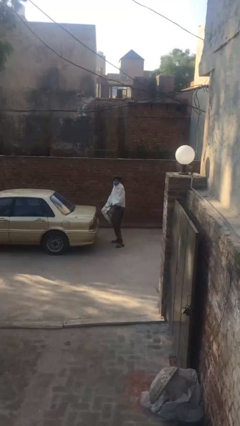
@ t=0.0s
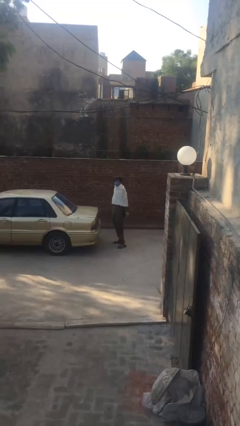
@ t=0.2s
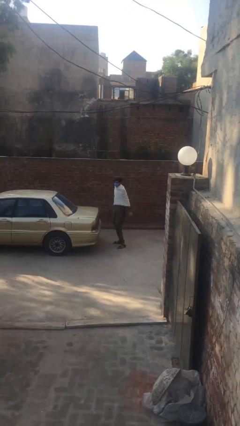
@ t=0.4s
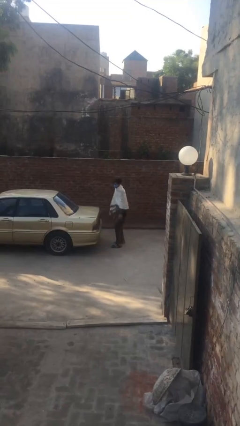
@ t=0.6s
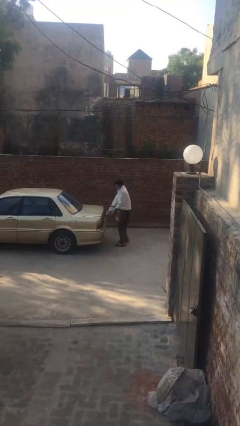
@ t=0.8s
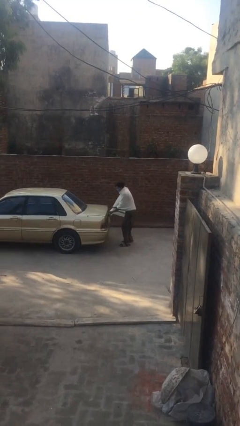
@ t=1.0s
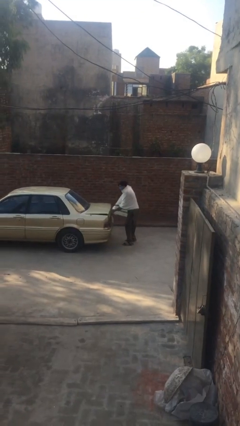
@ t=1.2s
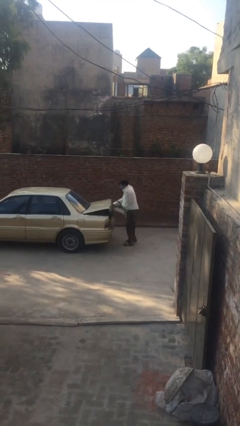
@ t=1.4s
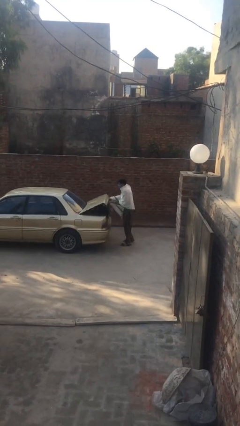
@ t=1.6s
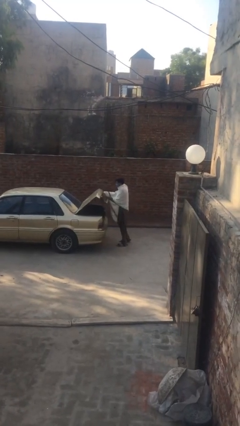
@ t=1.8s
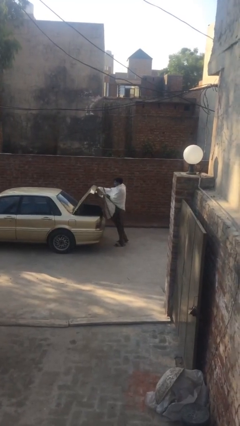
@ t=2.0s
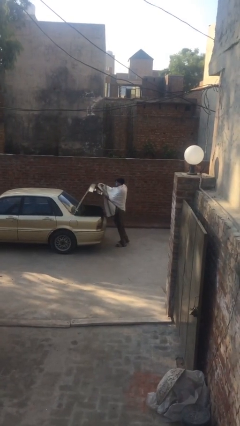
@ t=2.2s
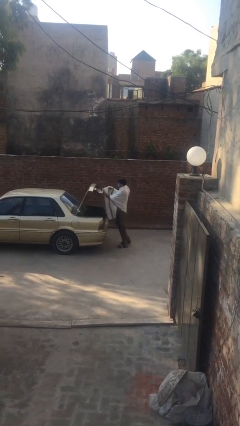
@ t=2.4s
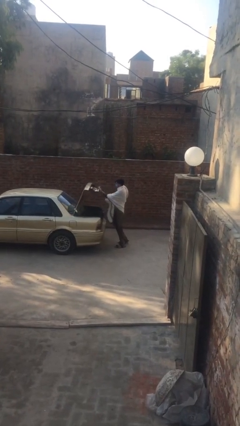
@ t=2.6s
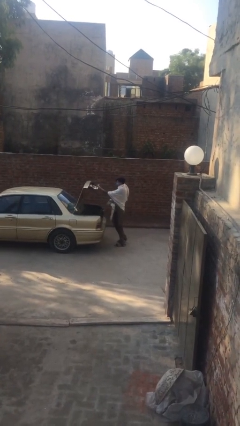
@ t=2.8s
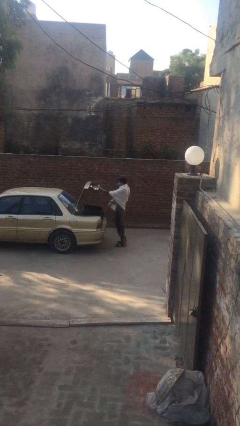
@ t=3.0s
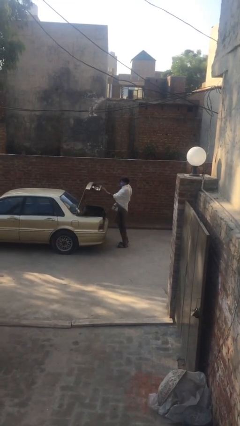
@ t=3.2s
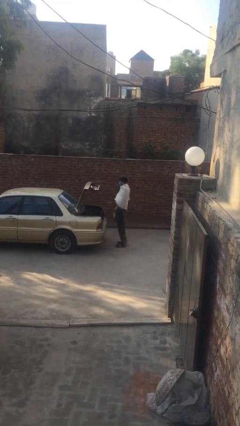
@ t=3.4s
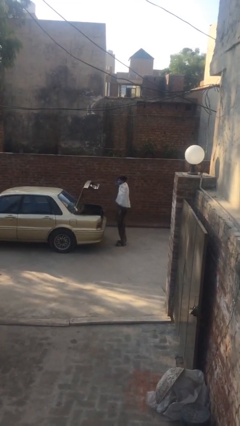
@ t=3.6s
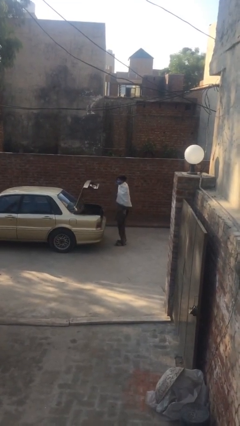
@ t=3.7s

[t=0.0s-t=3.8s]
person opens car trunk

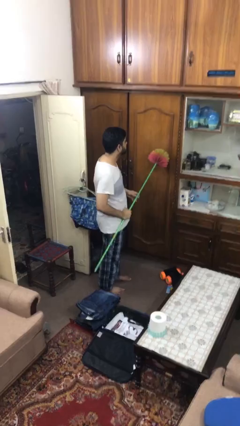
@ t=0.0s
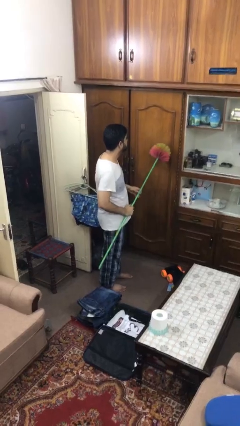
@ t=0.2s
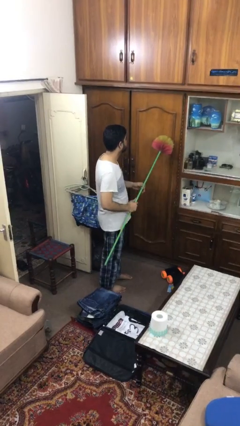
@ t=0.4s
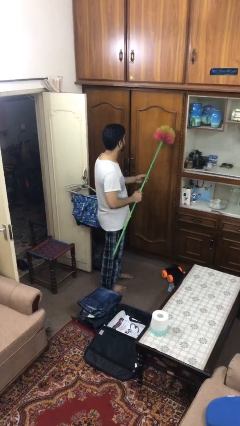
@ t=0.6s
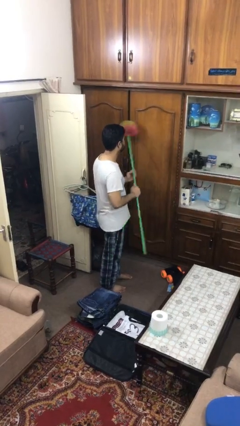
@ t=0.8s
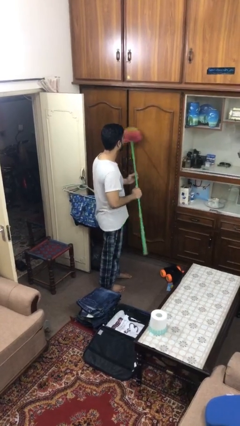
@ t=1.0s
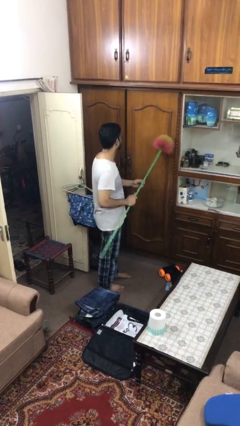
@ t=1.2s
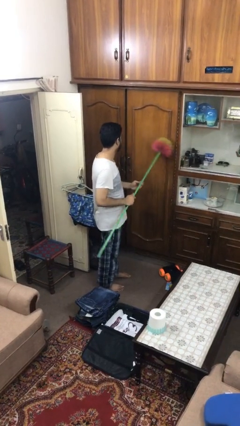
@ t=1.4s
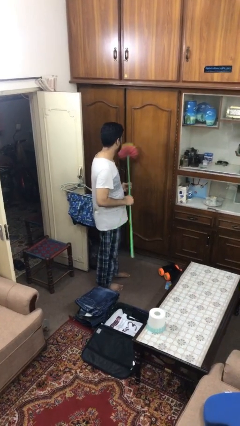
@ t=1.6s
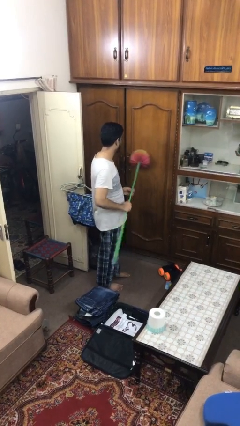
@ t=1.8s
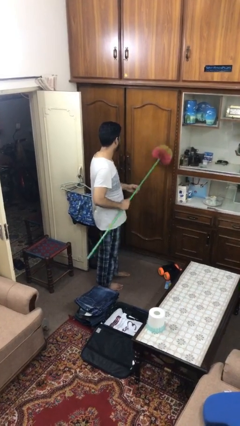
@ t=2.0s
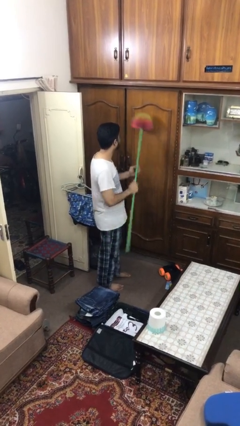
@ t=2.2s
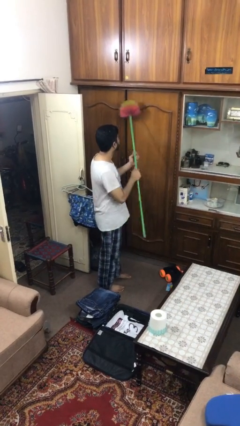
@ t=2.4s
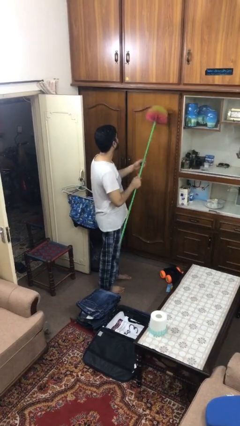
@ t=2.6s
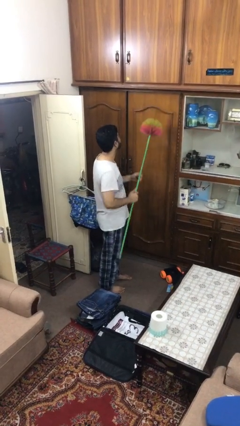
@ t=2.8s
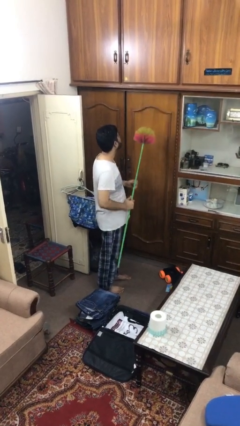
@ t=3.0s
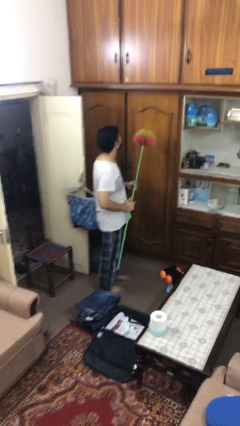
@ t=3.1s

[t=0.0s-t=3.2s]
person dusts furniture

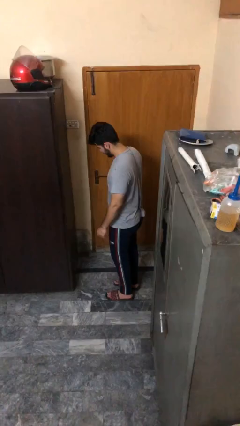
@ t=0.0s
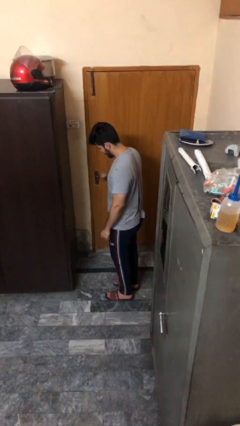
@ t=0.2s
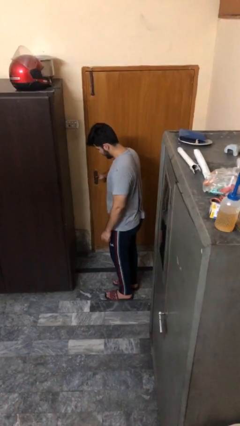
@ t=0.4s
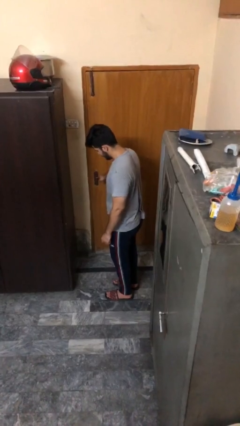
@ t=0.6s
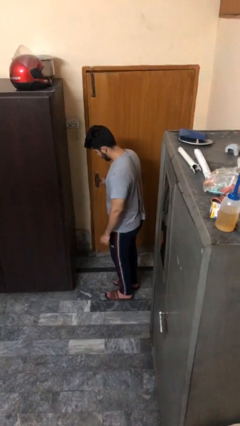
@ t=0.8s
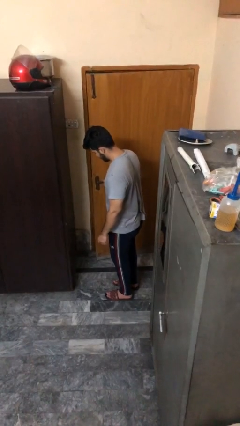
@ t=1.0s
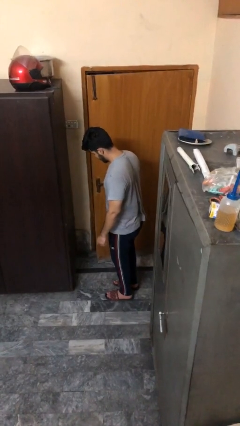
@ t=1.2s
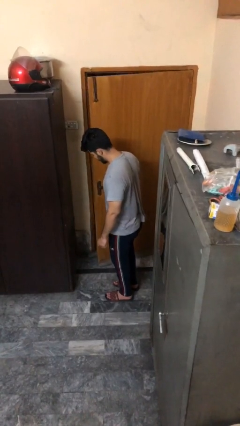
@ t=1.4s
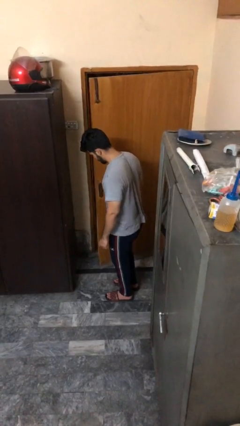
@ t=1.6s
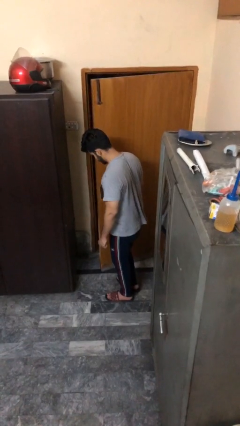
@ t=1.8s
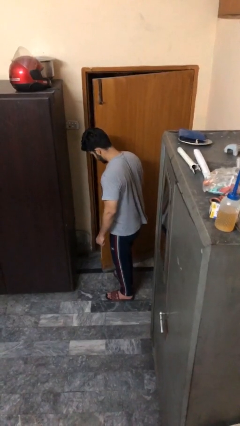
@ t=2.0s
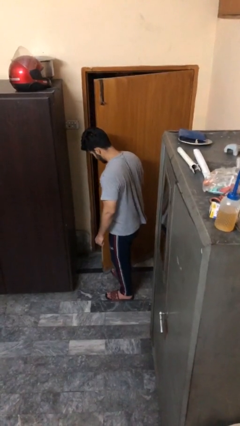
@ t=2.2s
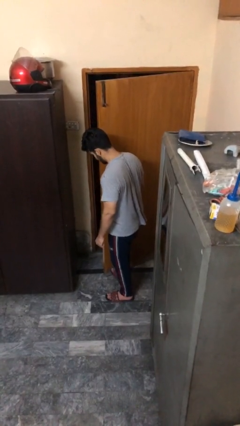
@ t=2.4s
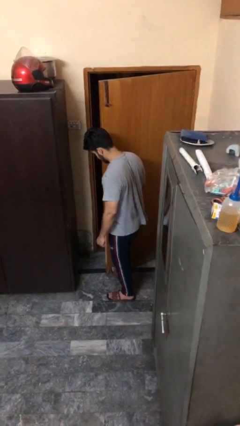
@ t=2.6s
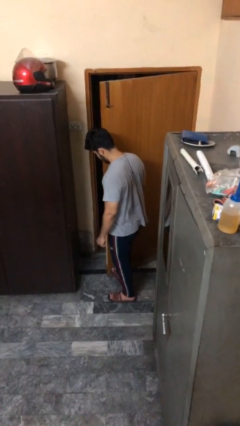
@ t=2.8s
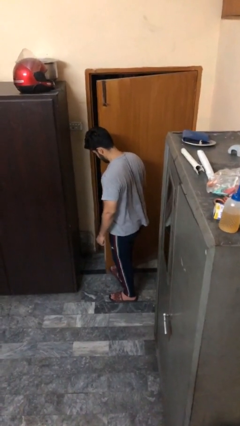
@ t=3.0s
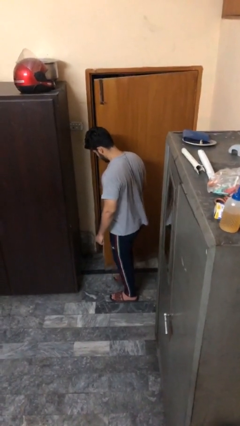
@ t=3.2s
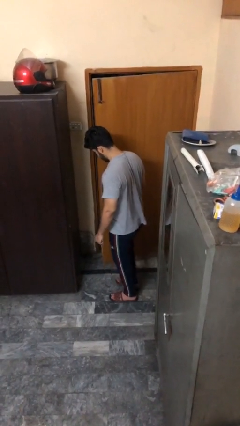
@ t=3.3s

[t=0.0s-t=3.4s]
person opens facility door

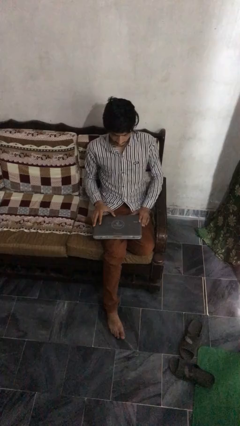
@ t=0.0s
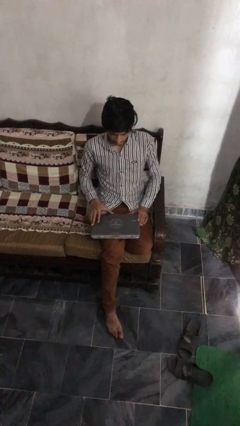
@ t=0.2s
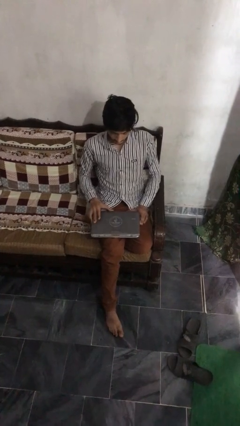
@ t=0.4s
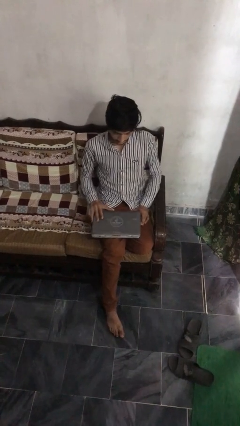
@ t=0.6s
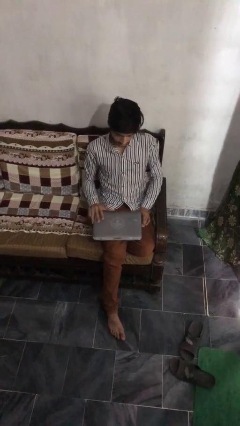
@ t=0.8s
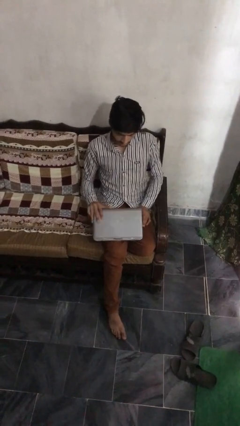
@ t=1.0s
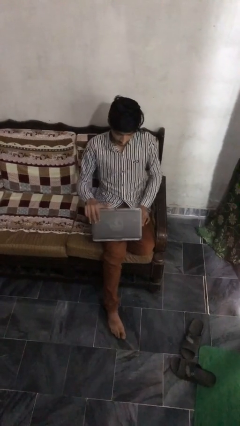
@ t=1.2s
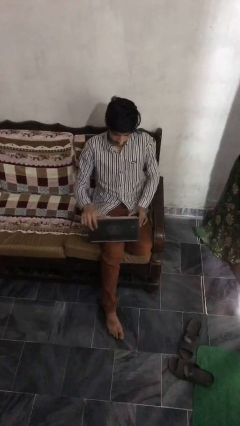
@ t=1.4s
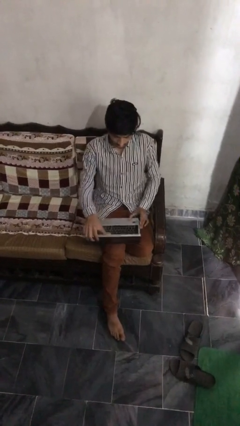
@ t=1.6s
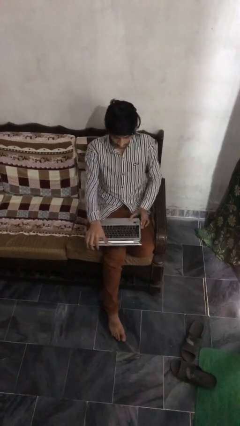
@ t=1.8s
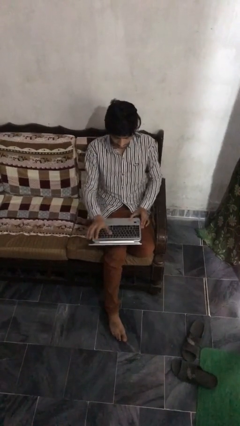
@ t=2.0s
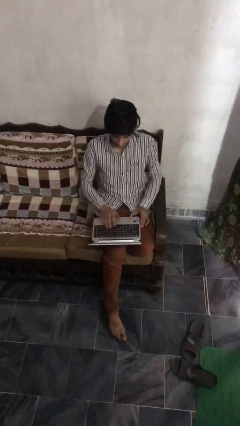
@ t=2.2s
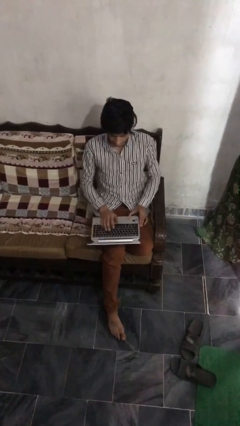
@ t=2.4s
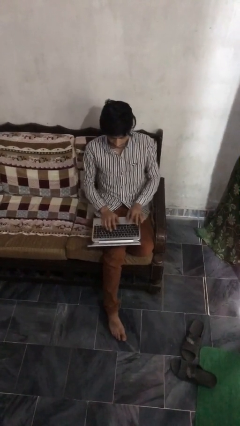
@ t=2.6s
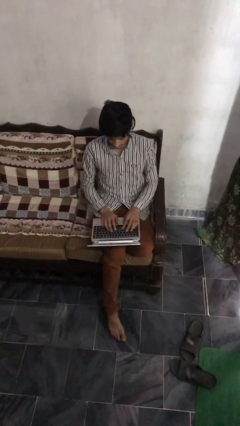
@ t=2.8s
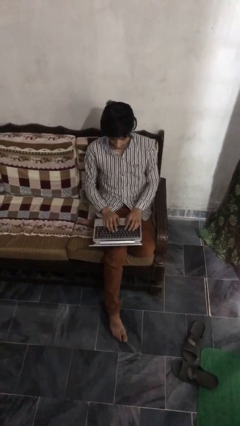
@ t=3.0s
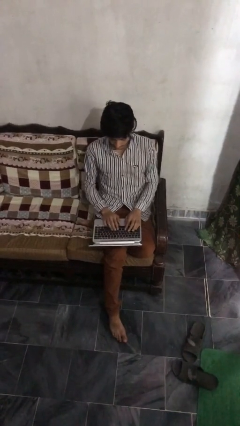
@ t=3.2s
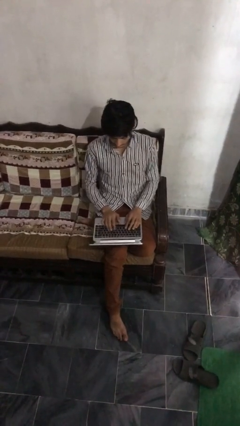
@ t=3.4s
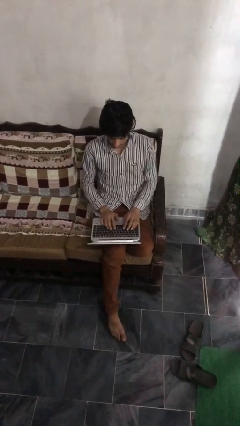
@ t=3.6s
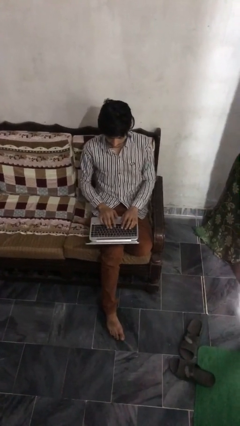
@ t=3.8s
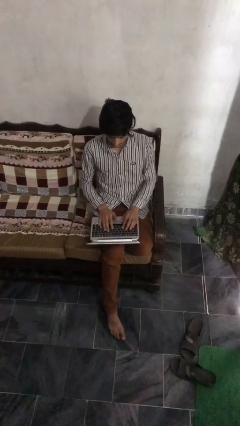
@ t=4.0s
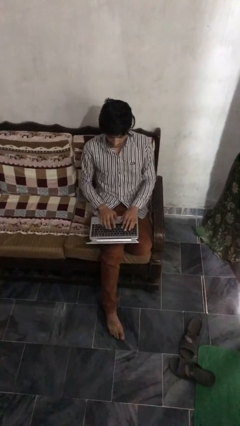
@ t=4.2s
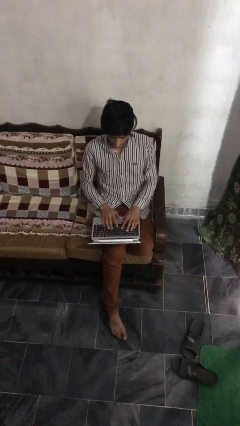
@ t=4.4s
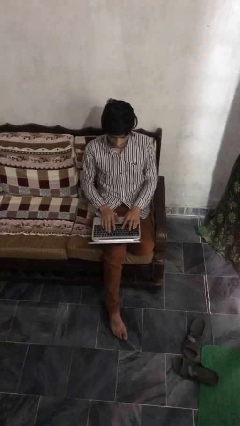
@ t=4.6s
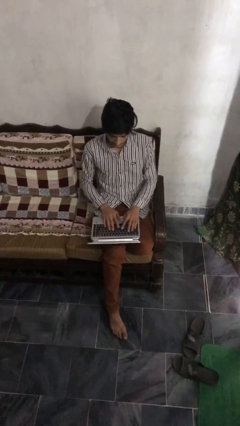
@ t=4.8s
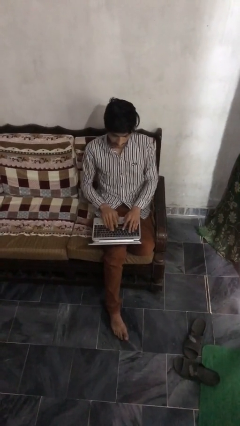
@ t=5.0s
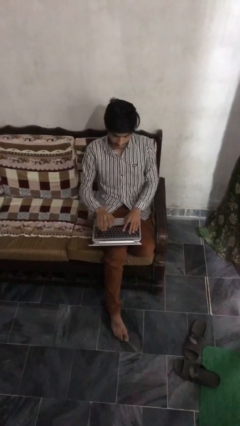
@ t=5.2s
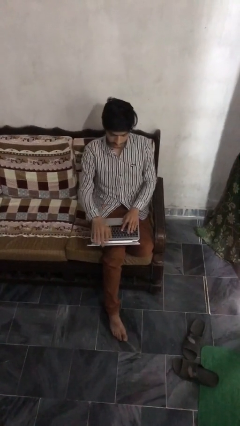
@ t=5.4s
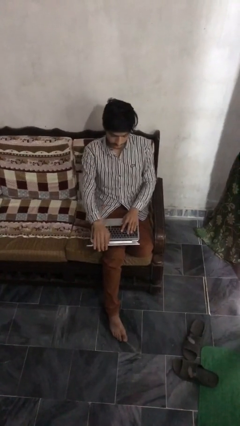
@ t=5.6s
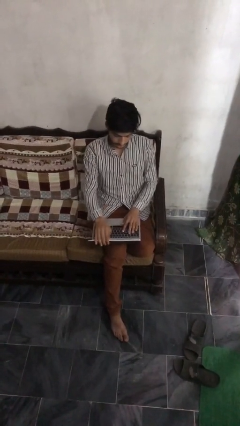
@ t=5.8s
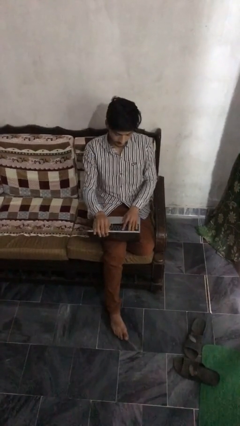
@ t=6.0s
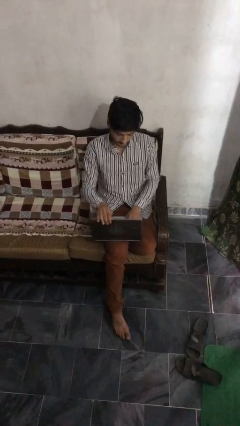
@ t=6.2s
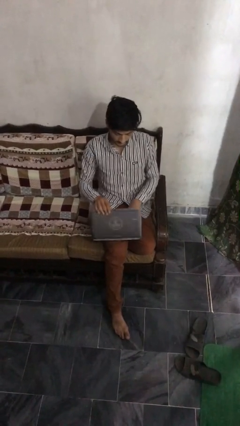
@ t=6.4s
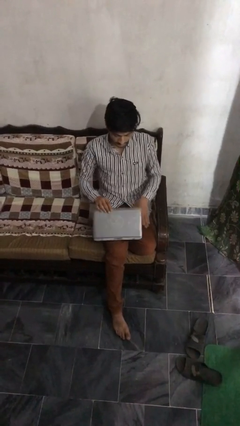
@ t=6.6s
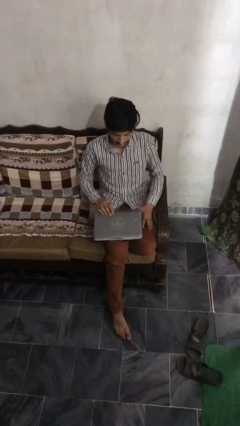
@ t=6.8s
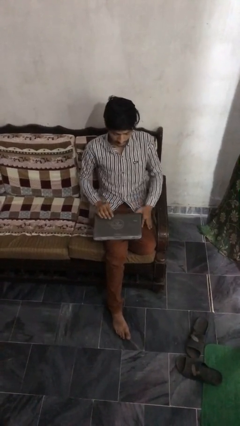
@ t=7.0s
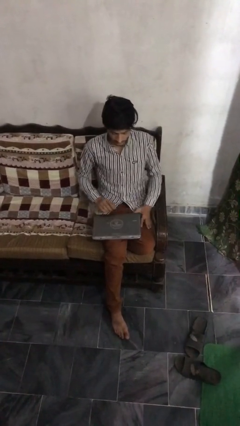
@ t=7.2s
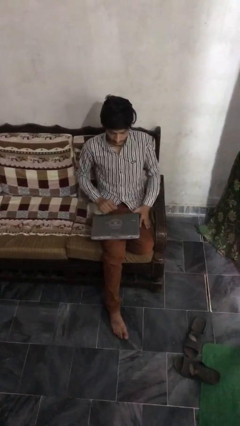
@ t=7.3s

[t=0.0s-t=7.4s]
person interacts with laptop
